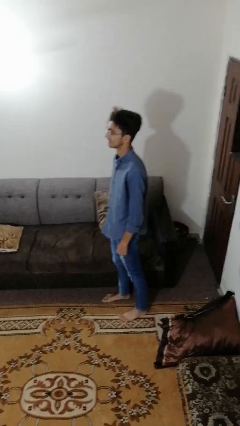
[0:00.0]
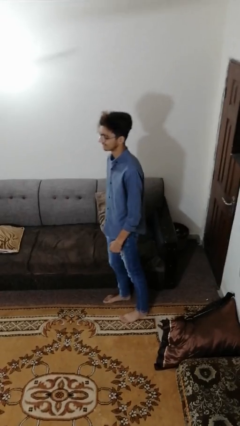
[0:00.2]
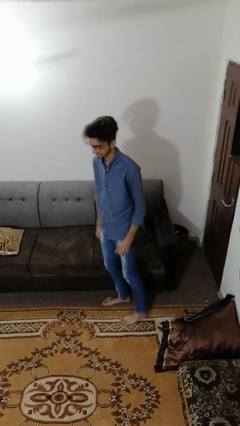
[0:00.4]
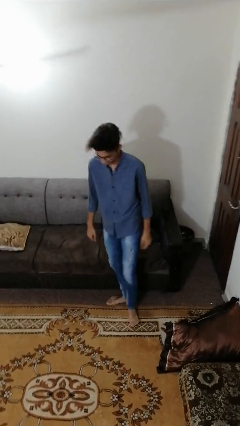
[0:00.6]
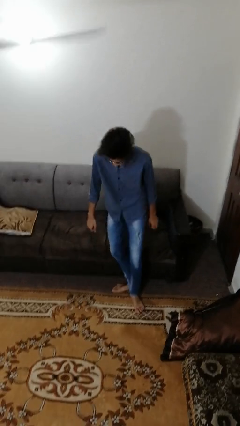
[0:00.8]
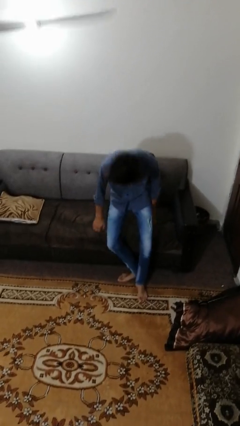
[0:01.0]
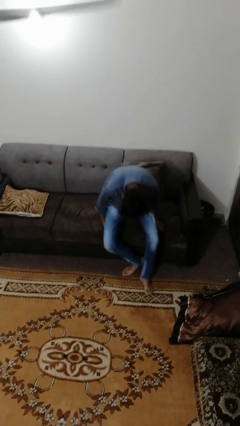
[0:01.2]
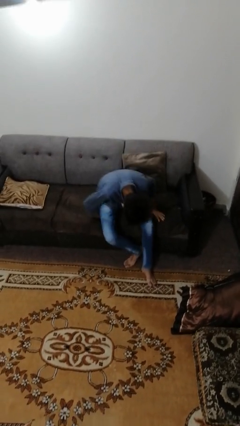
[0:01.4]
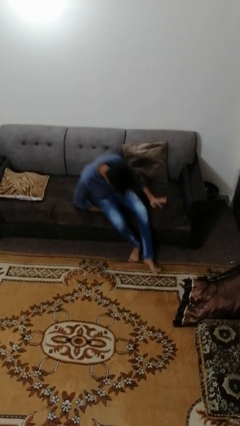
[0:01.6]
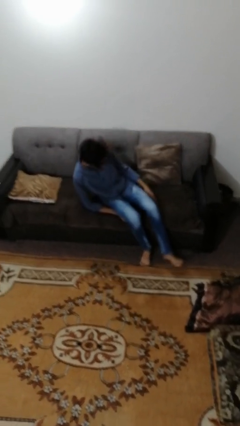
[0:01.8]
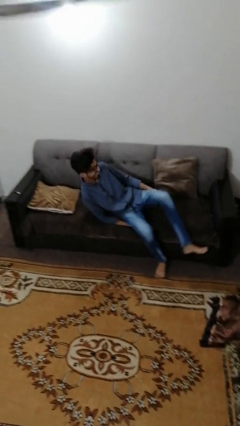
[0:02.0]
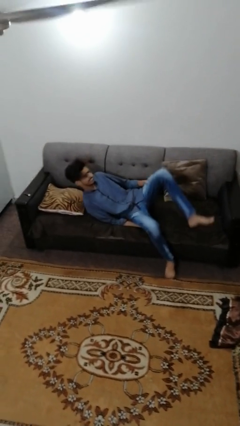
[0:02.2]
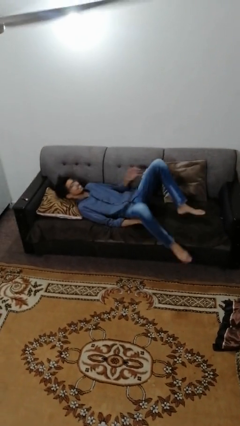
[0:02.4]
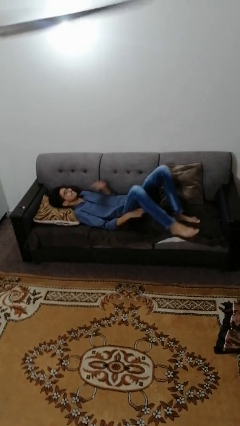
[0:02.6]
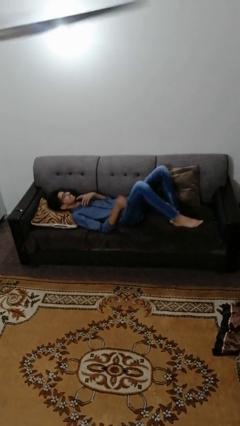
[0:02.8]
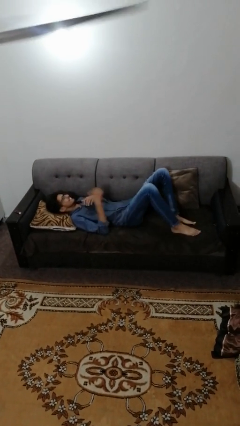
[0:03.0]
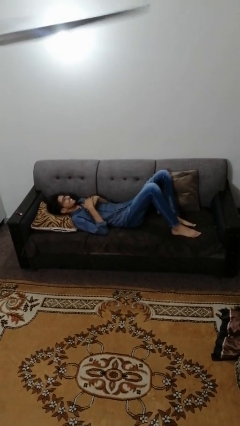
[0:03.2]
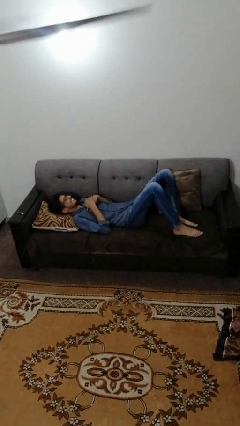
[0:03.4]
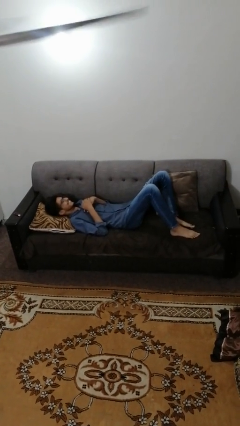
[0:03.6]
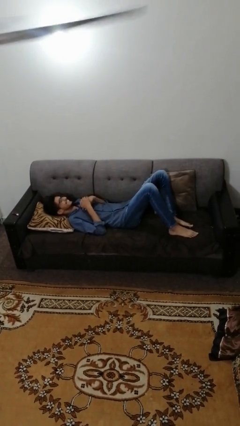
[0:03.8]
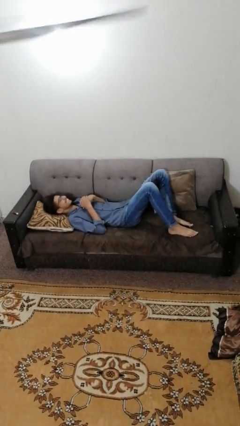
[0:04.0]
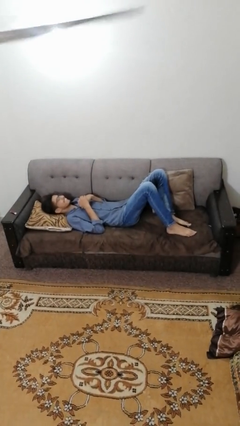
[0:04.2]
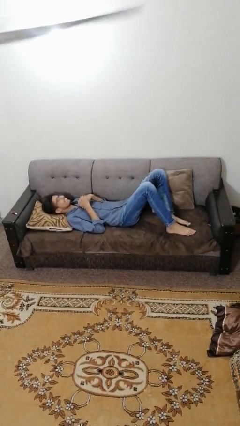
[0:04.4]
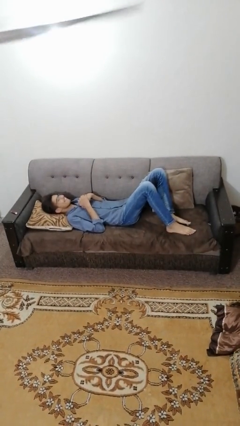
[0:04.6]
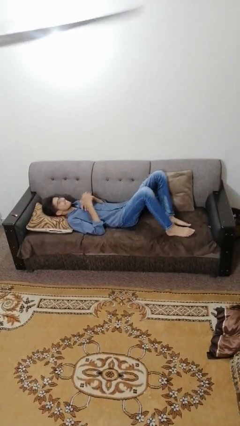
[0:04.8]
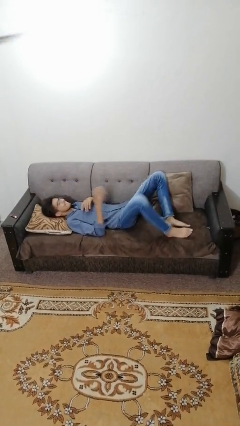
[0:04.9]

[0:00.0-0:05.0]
person lies down on couch

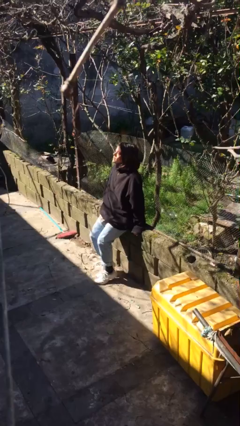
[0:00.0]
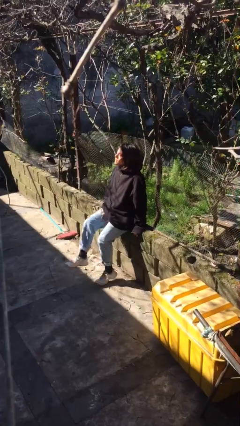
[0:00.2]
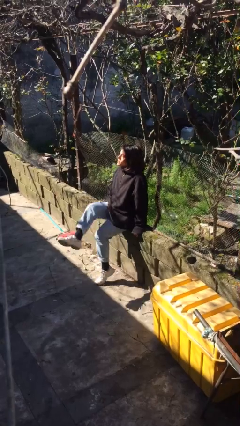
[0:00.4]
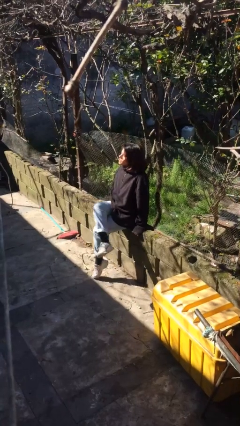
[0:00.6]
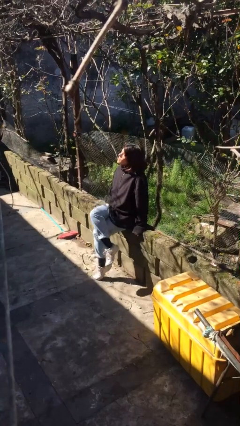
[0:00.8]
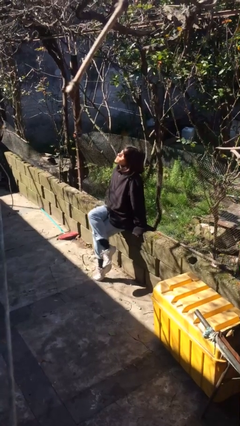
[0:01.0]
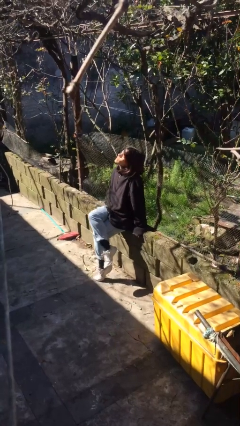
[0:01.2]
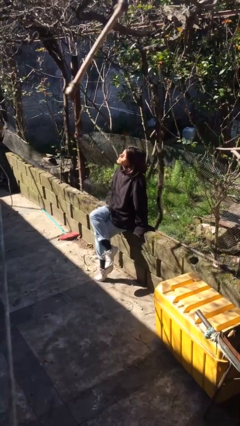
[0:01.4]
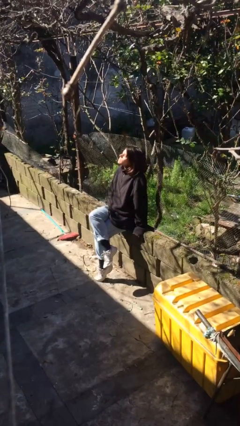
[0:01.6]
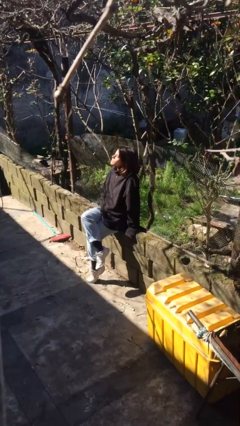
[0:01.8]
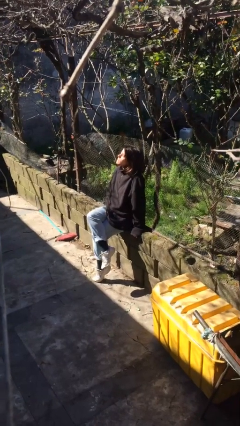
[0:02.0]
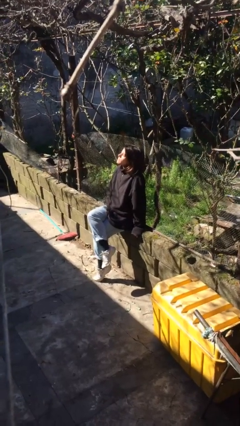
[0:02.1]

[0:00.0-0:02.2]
person crosses legs

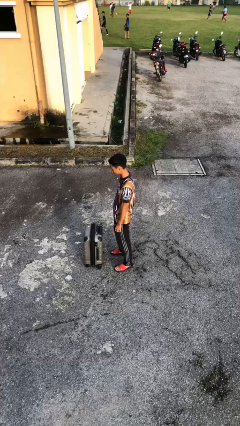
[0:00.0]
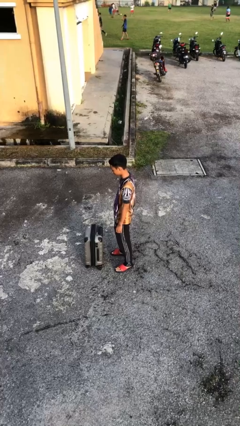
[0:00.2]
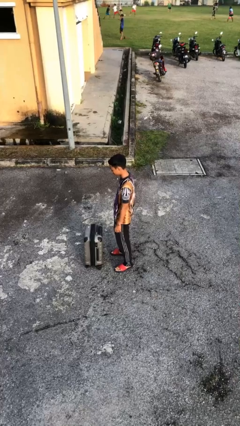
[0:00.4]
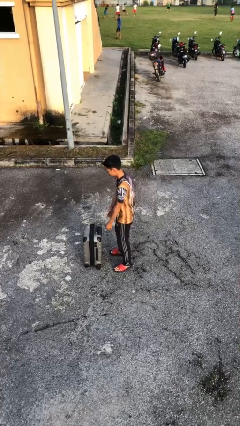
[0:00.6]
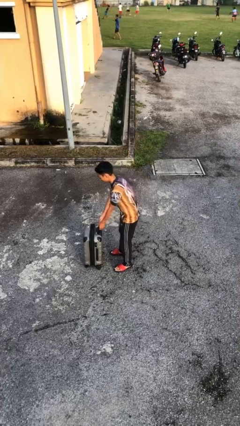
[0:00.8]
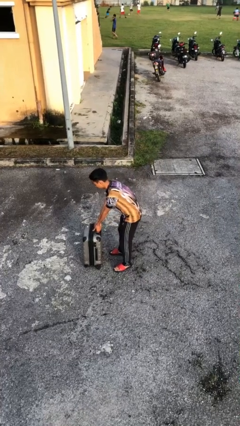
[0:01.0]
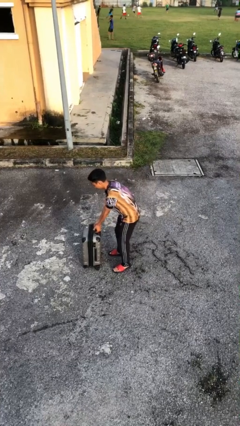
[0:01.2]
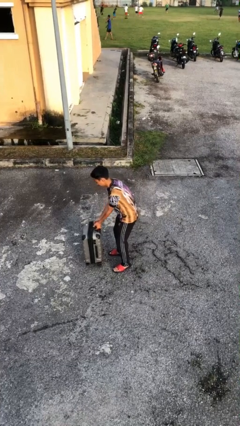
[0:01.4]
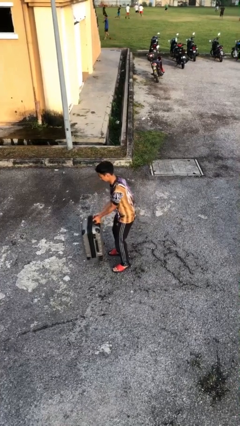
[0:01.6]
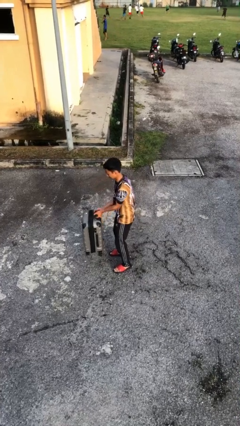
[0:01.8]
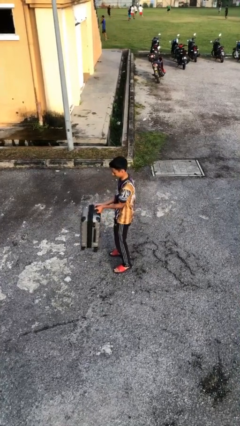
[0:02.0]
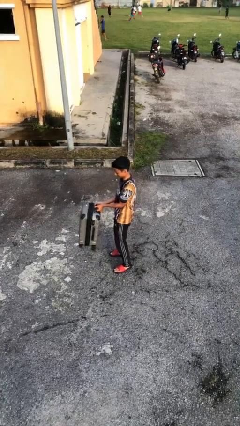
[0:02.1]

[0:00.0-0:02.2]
person picks up object from floor

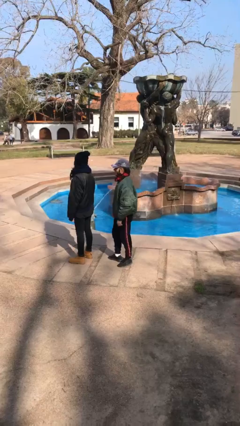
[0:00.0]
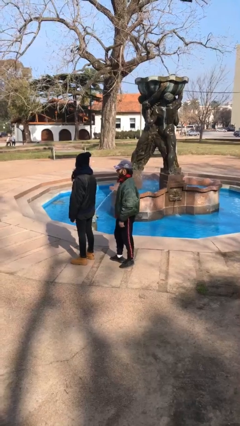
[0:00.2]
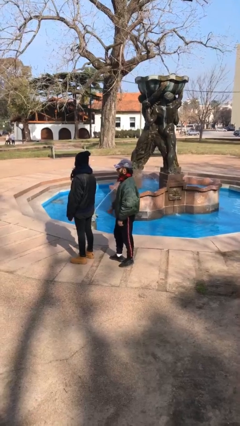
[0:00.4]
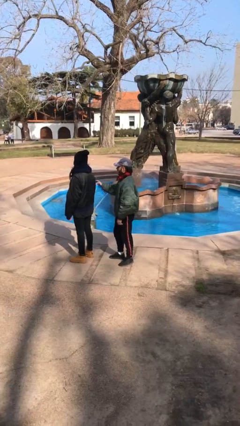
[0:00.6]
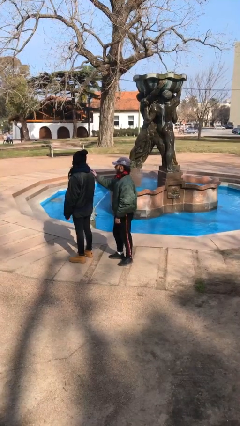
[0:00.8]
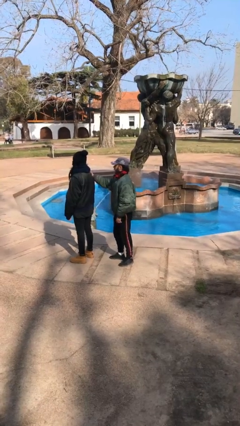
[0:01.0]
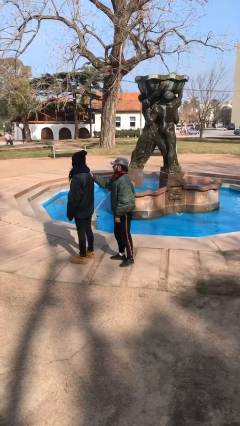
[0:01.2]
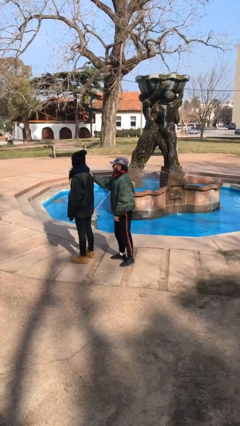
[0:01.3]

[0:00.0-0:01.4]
person grabs person by shoulder

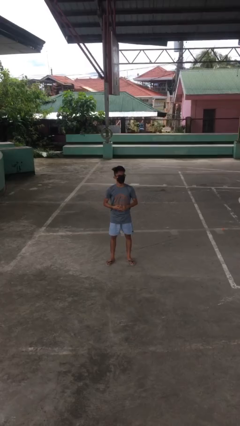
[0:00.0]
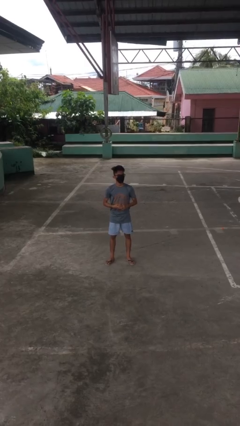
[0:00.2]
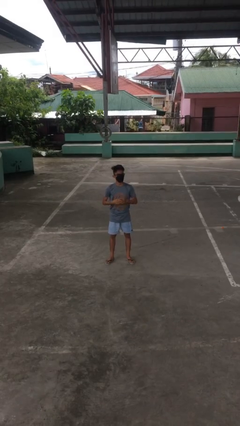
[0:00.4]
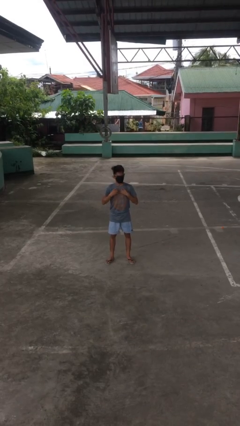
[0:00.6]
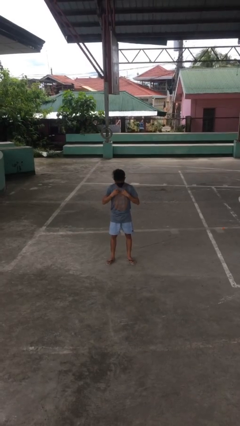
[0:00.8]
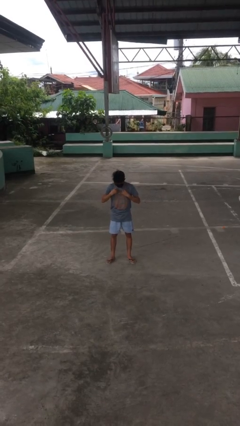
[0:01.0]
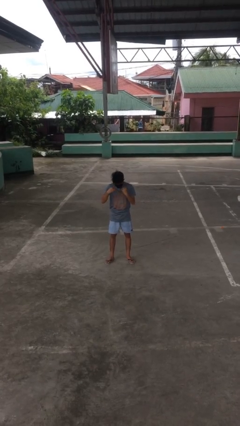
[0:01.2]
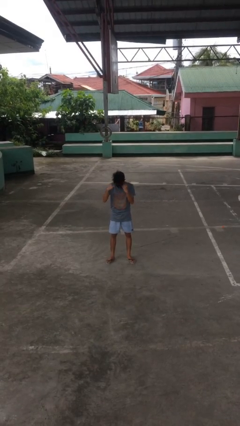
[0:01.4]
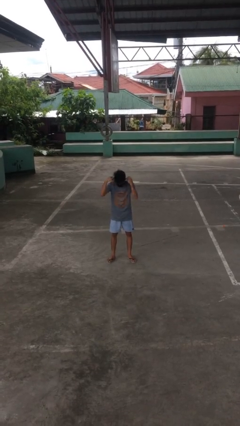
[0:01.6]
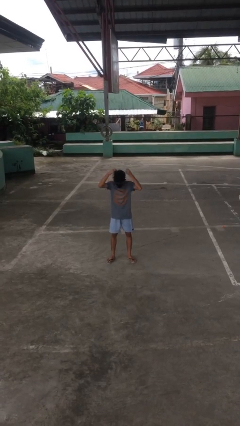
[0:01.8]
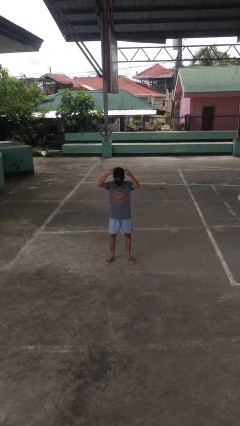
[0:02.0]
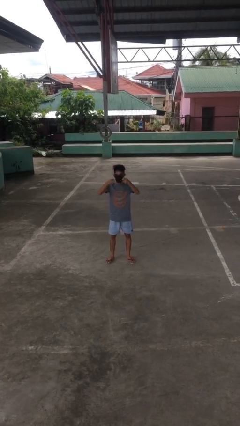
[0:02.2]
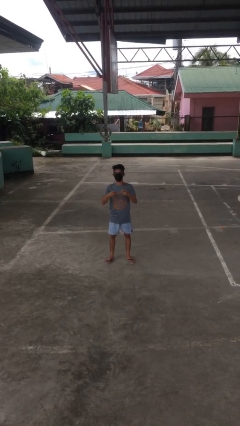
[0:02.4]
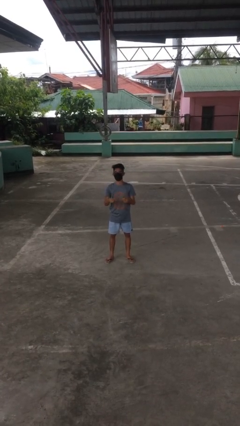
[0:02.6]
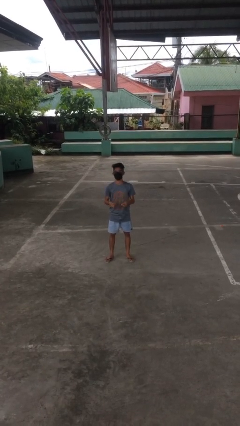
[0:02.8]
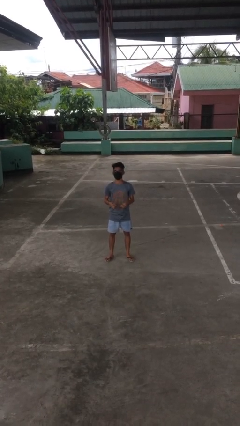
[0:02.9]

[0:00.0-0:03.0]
person takes off necklace

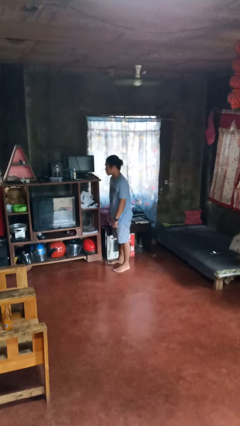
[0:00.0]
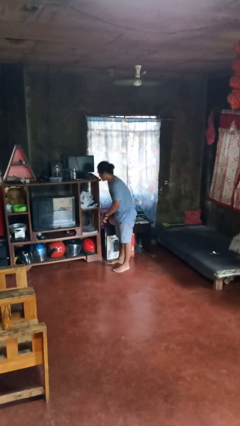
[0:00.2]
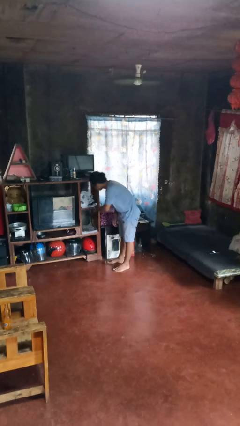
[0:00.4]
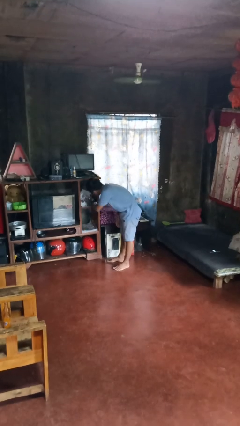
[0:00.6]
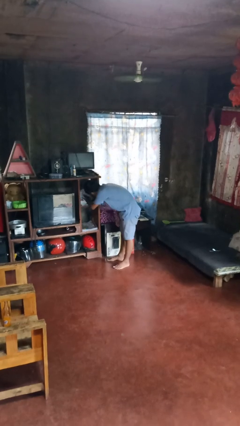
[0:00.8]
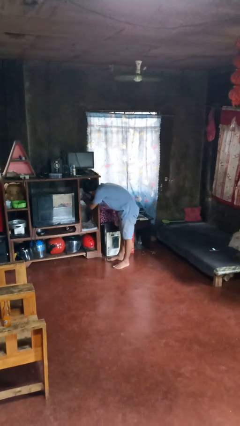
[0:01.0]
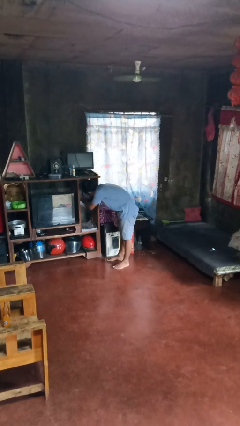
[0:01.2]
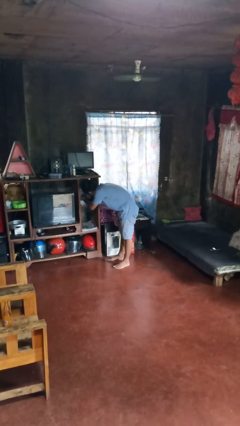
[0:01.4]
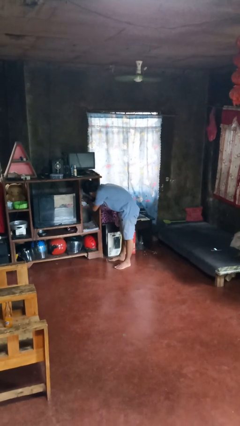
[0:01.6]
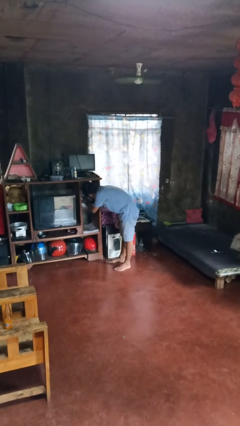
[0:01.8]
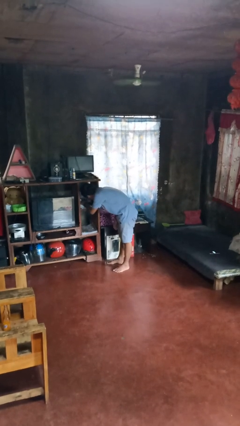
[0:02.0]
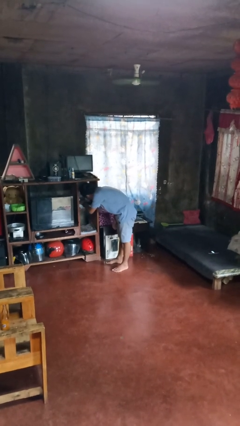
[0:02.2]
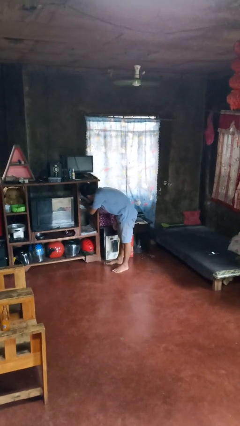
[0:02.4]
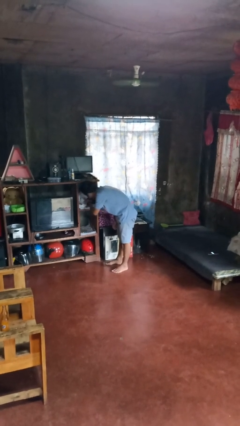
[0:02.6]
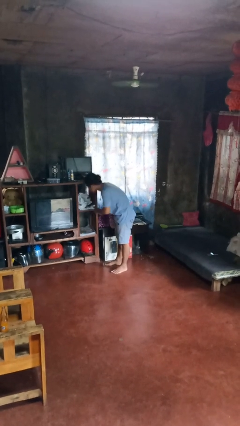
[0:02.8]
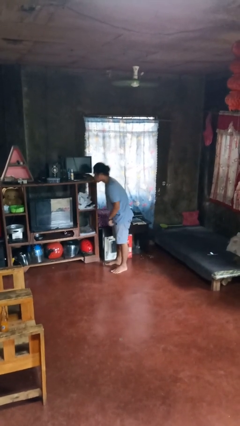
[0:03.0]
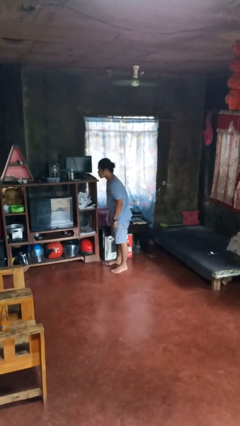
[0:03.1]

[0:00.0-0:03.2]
person searches in cabinet
